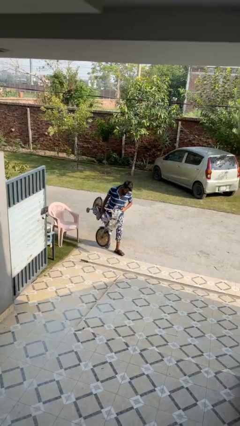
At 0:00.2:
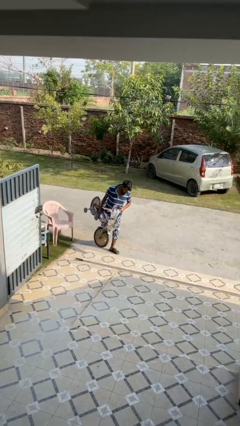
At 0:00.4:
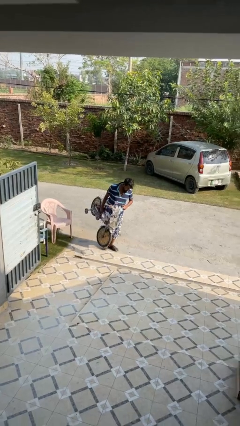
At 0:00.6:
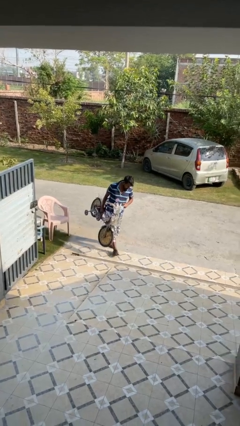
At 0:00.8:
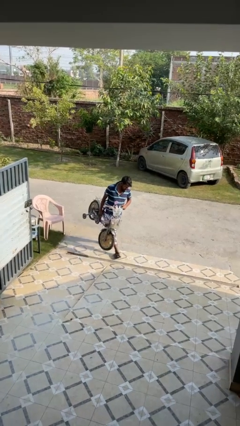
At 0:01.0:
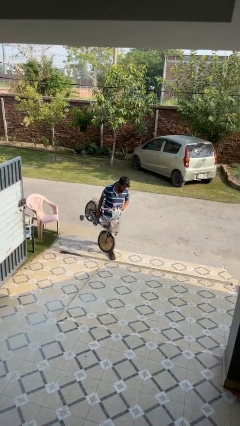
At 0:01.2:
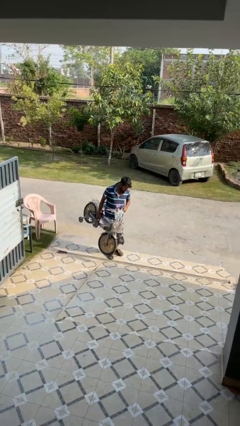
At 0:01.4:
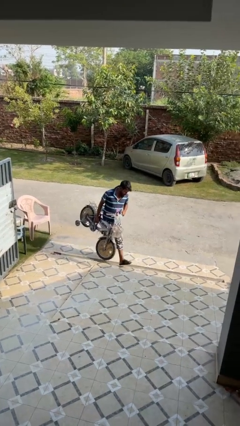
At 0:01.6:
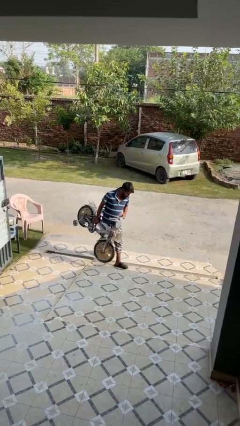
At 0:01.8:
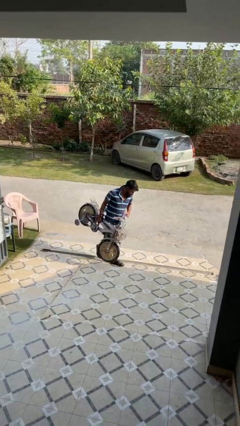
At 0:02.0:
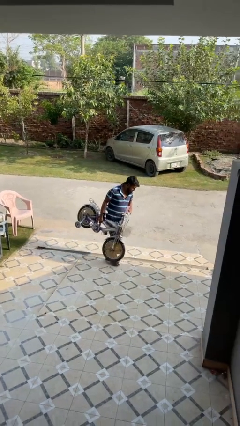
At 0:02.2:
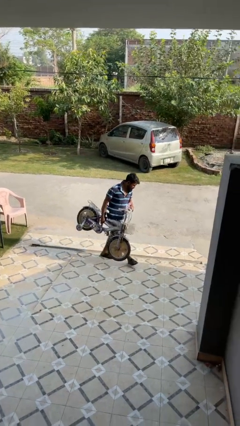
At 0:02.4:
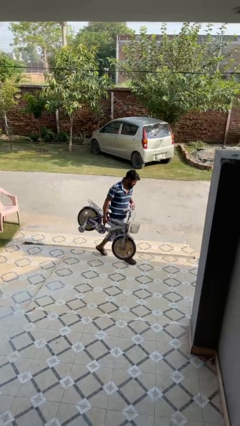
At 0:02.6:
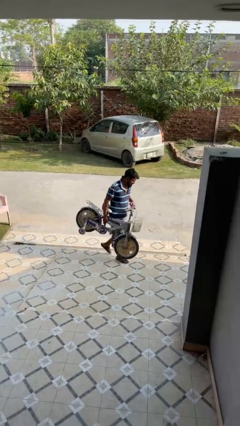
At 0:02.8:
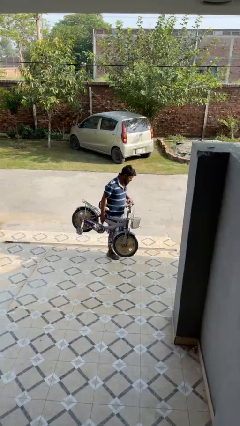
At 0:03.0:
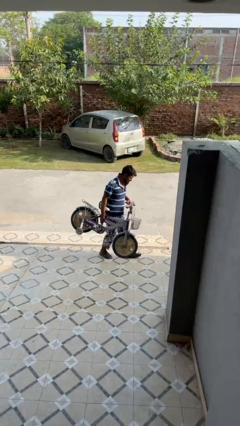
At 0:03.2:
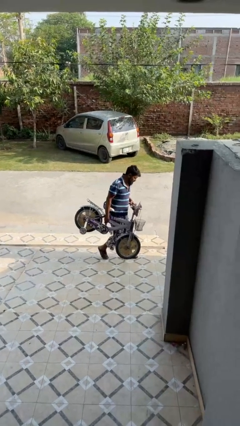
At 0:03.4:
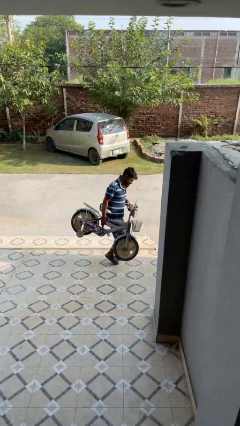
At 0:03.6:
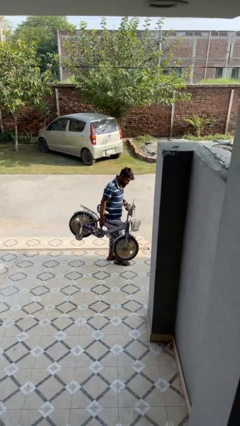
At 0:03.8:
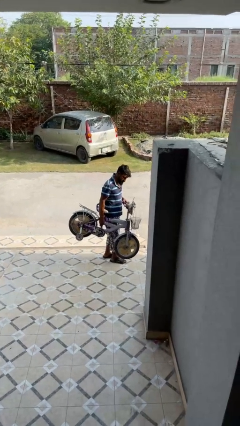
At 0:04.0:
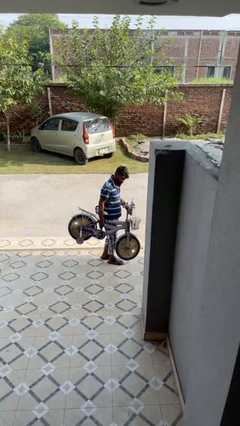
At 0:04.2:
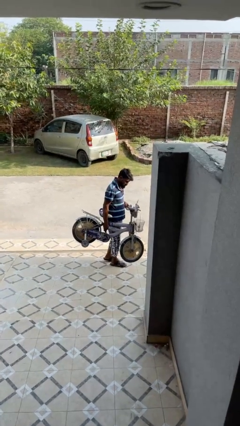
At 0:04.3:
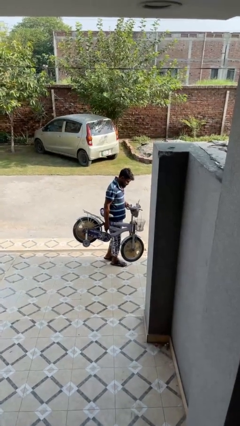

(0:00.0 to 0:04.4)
person carries bicycle

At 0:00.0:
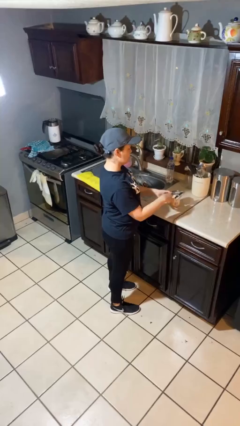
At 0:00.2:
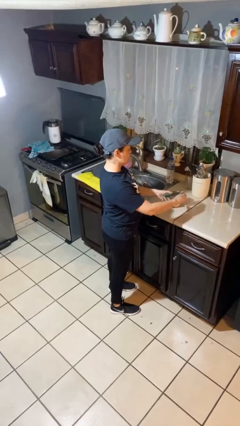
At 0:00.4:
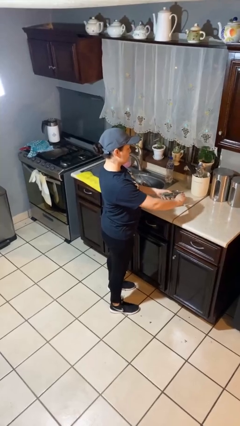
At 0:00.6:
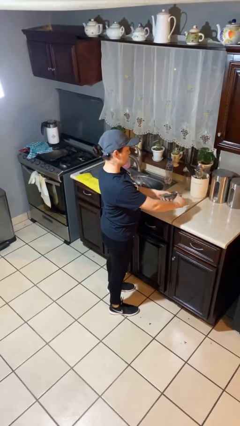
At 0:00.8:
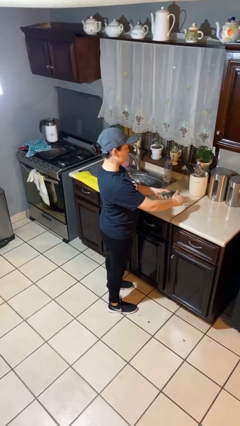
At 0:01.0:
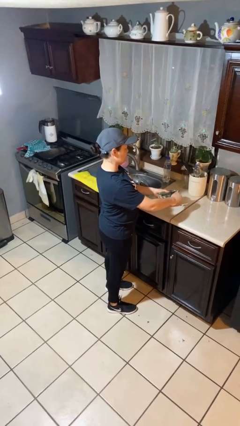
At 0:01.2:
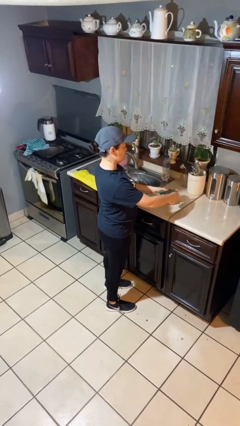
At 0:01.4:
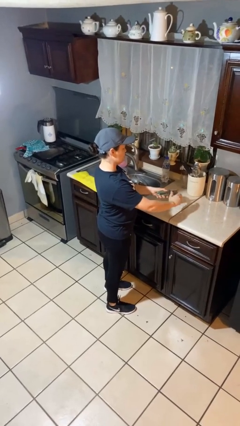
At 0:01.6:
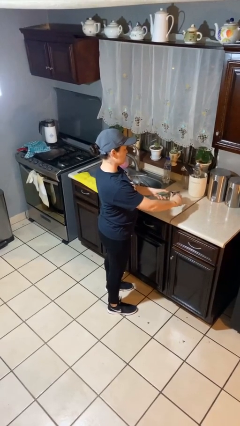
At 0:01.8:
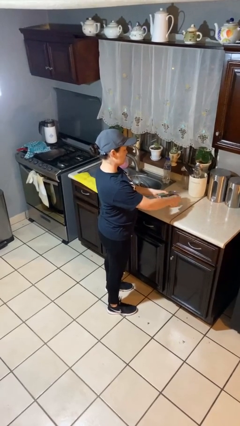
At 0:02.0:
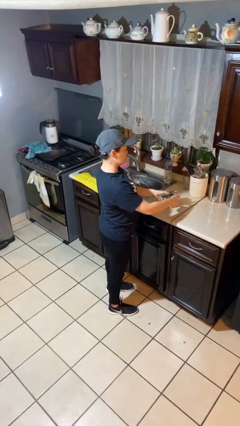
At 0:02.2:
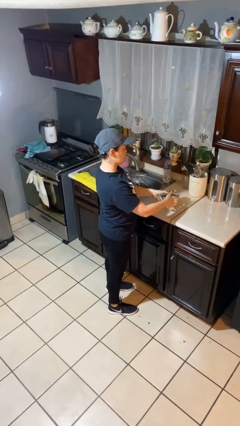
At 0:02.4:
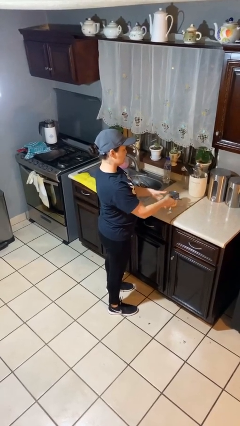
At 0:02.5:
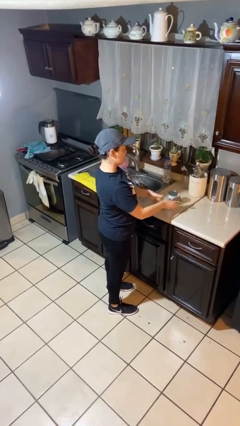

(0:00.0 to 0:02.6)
person opens can with can opener

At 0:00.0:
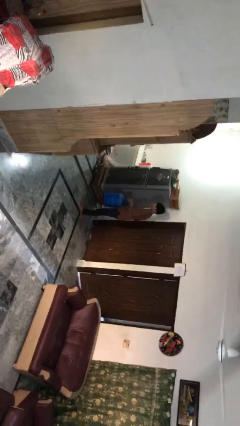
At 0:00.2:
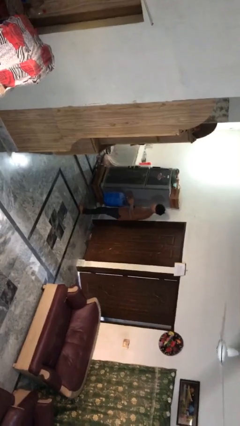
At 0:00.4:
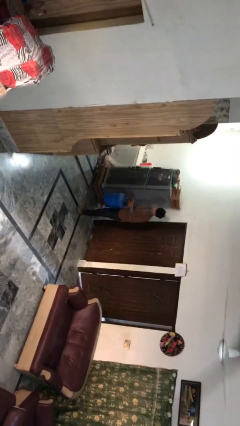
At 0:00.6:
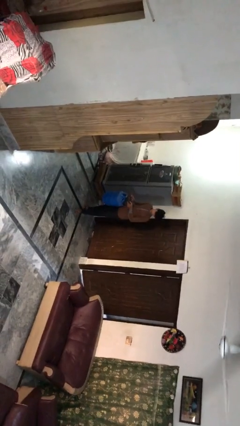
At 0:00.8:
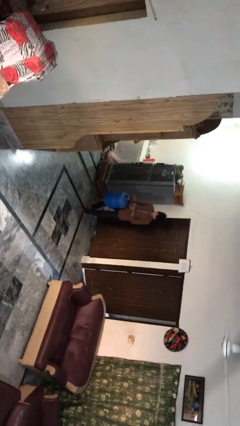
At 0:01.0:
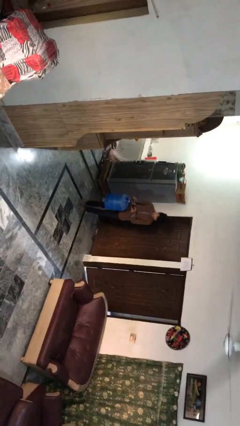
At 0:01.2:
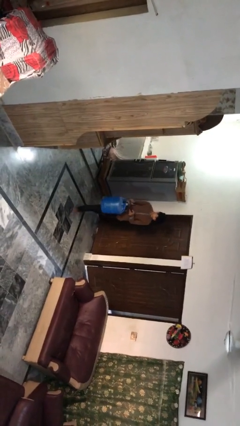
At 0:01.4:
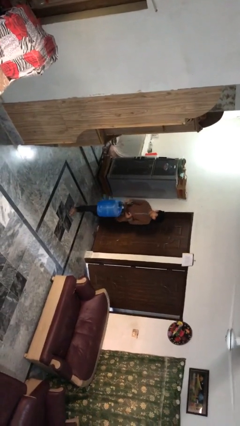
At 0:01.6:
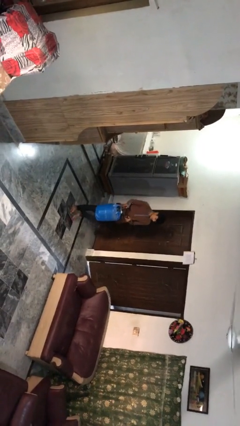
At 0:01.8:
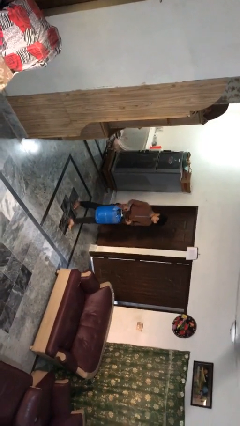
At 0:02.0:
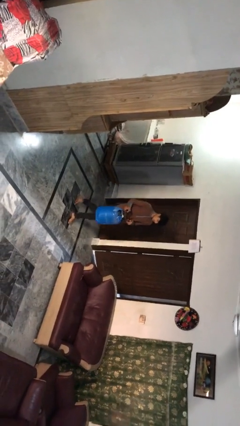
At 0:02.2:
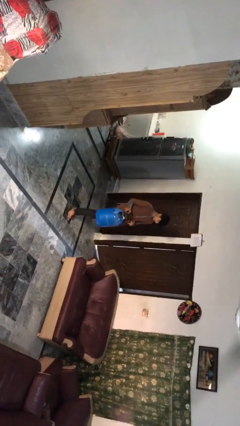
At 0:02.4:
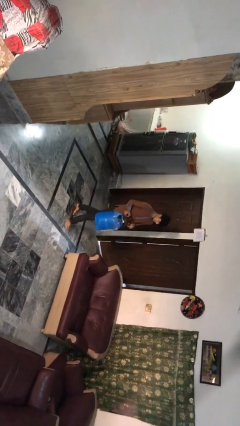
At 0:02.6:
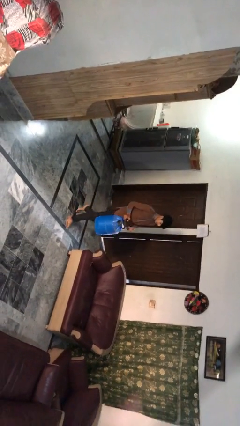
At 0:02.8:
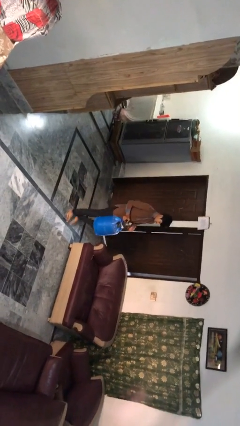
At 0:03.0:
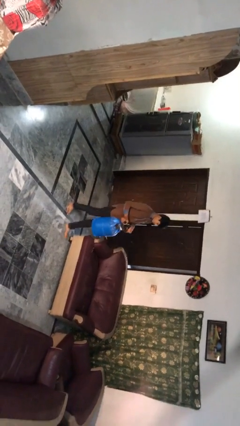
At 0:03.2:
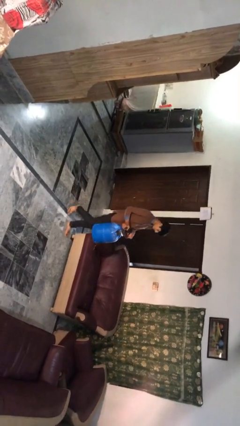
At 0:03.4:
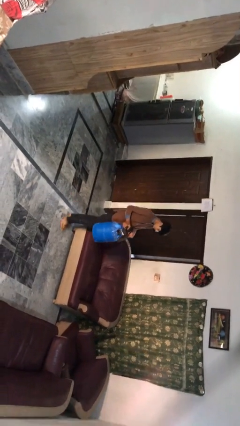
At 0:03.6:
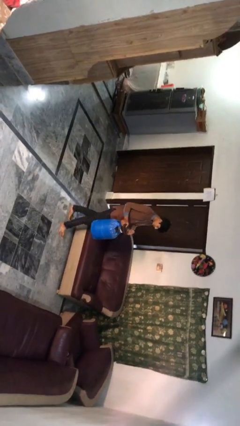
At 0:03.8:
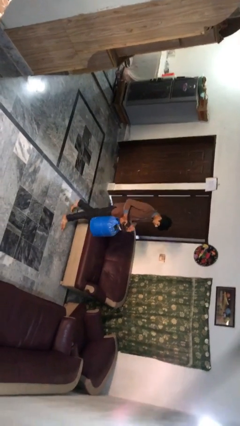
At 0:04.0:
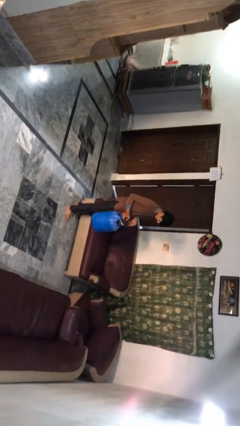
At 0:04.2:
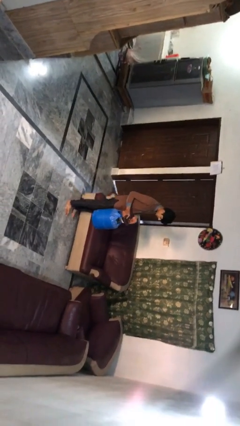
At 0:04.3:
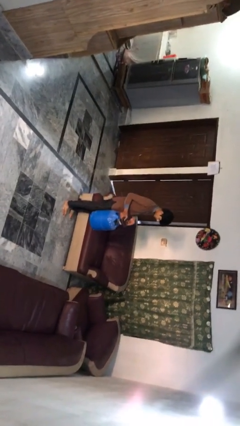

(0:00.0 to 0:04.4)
person carries heavy object

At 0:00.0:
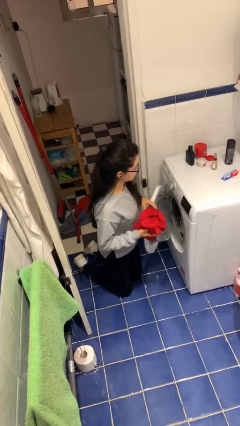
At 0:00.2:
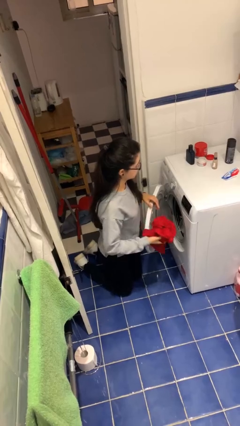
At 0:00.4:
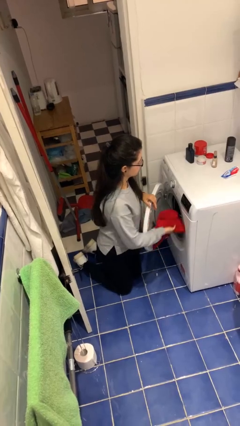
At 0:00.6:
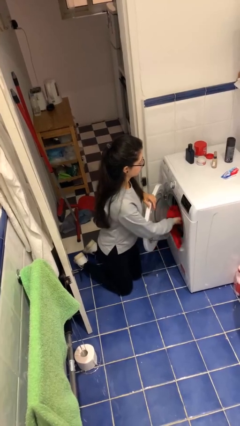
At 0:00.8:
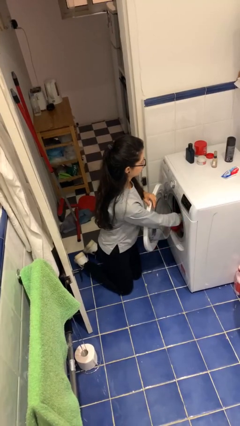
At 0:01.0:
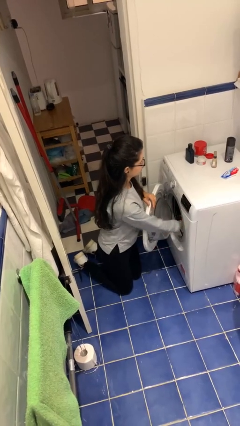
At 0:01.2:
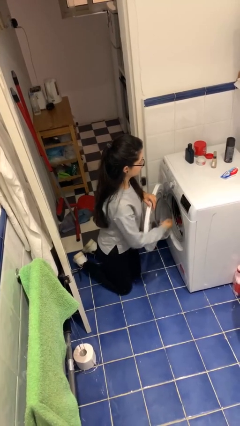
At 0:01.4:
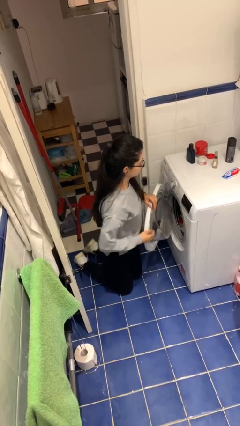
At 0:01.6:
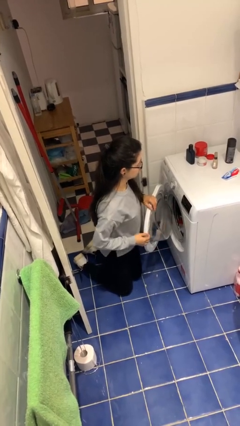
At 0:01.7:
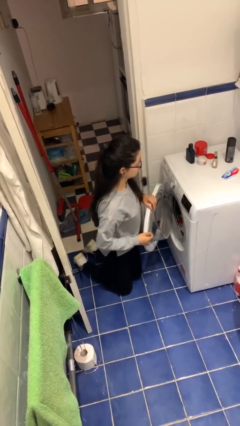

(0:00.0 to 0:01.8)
person loads dryer

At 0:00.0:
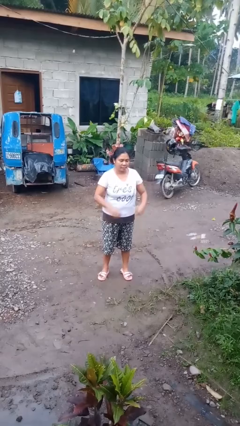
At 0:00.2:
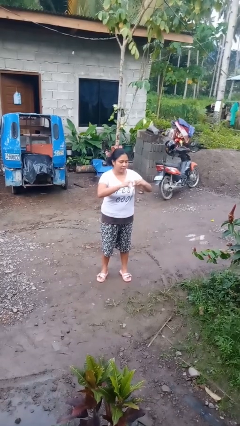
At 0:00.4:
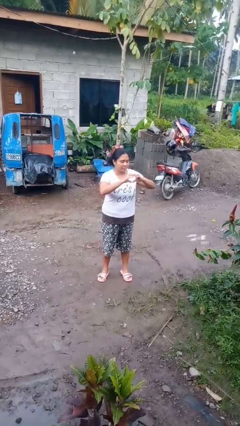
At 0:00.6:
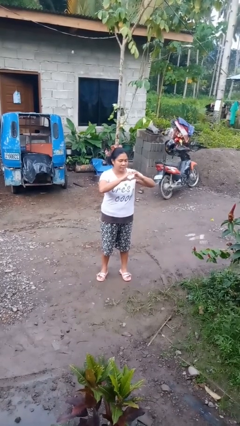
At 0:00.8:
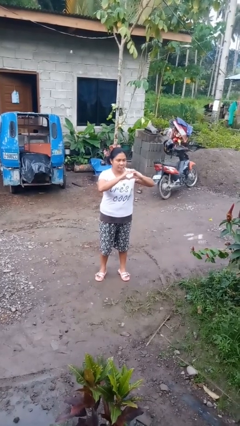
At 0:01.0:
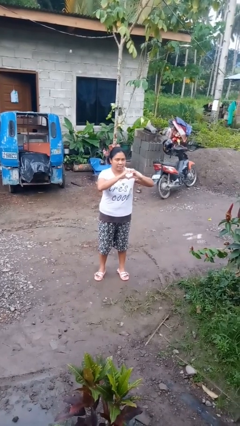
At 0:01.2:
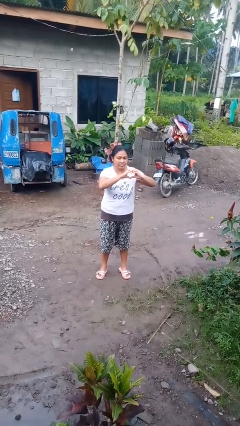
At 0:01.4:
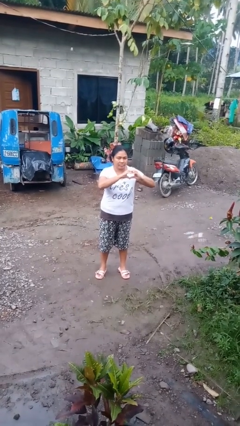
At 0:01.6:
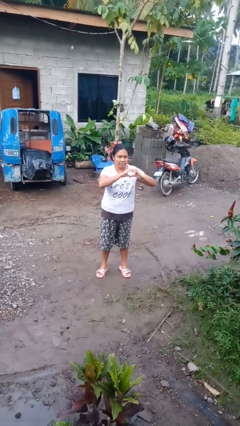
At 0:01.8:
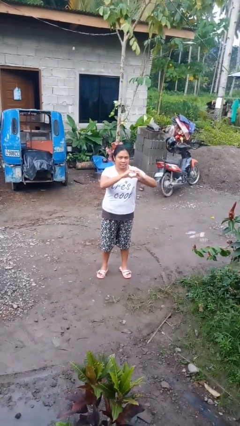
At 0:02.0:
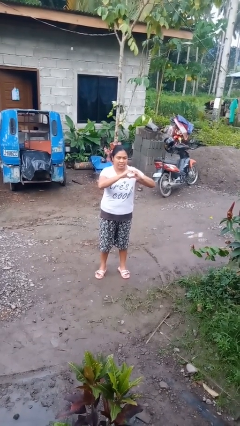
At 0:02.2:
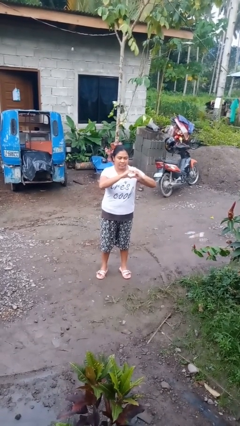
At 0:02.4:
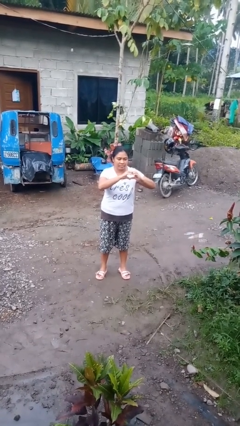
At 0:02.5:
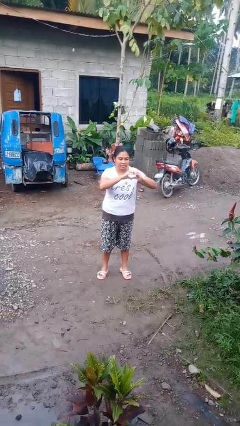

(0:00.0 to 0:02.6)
person gestures heart

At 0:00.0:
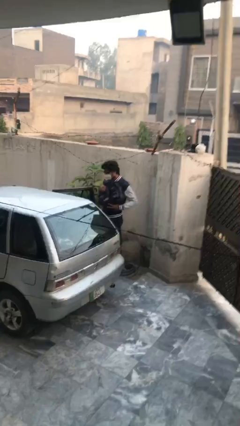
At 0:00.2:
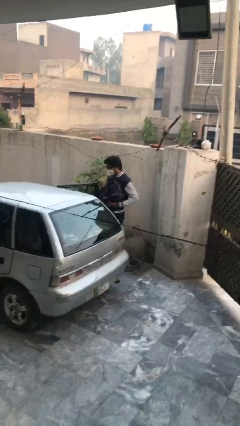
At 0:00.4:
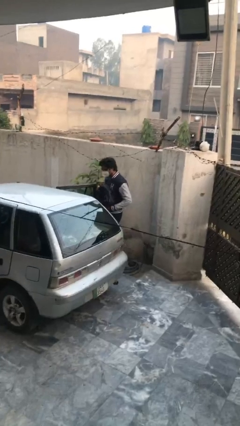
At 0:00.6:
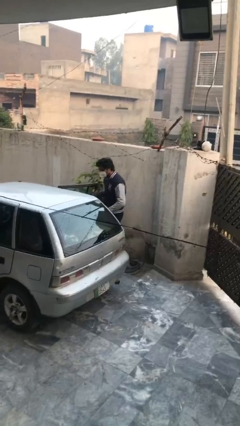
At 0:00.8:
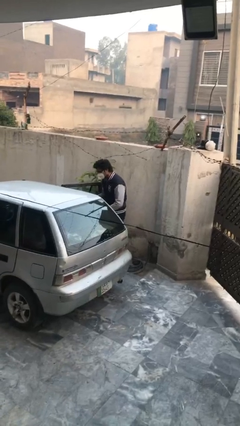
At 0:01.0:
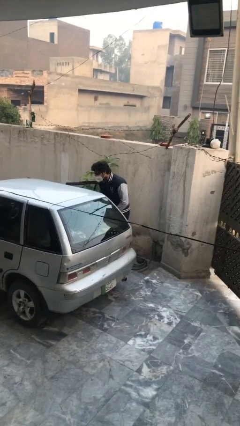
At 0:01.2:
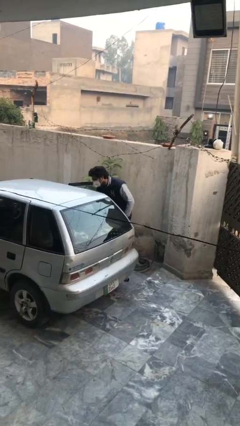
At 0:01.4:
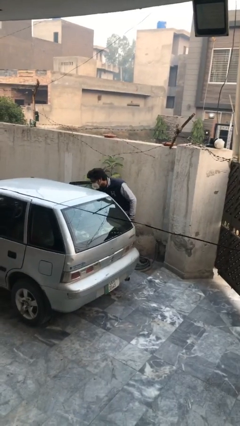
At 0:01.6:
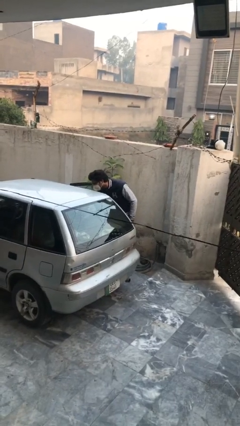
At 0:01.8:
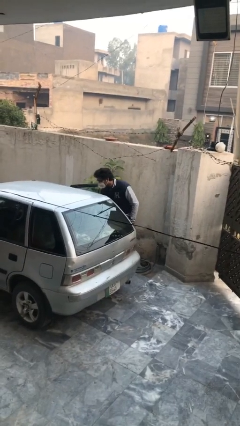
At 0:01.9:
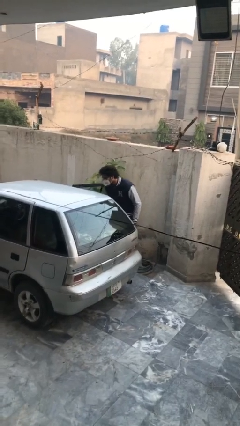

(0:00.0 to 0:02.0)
person loads car
